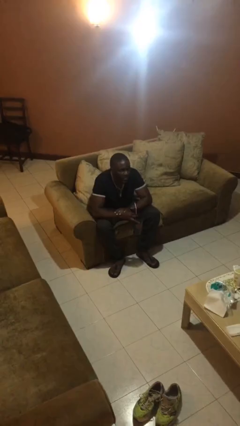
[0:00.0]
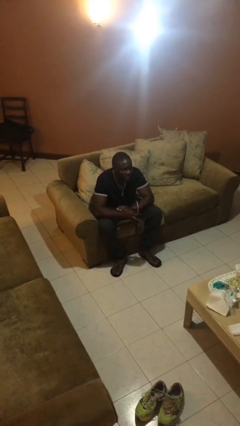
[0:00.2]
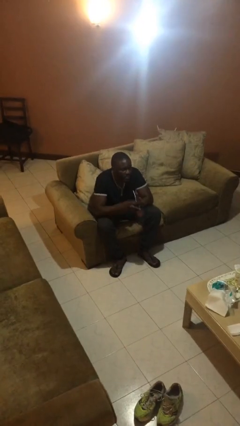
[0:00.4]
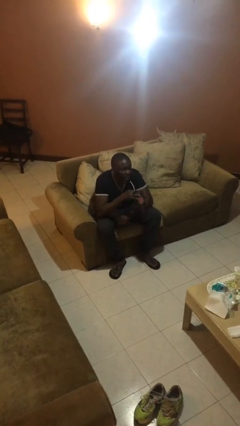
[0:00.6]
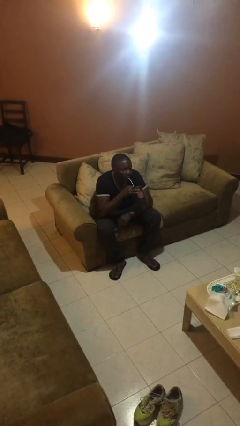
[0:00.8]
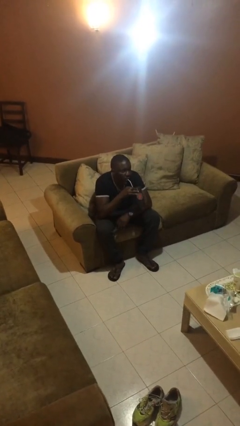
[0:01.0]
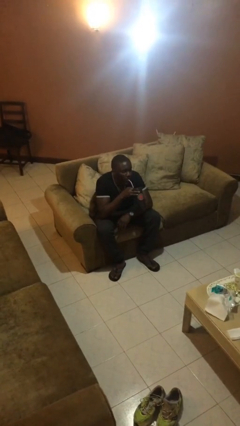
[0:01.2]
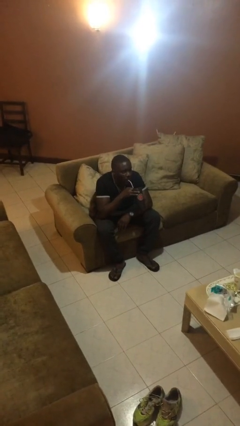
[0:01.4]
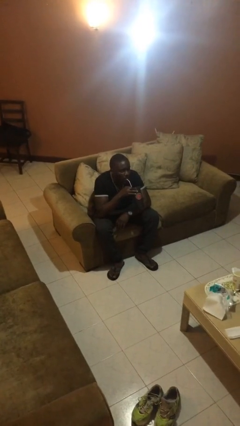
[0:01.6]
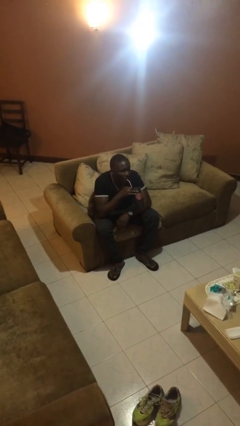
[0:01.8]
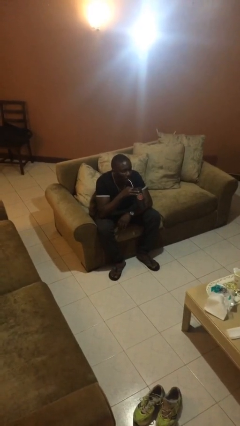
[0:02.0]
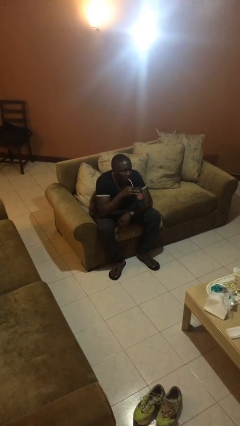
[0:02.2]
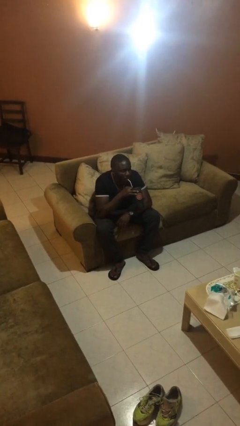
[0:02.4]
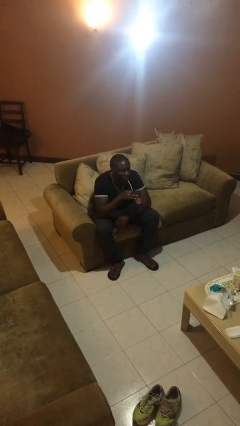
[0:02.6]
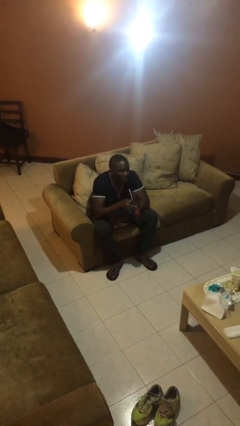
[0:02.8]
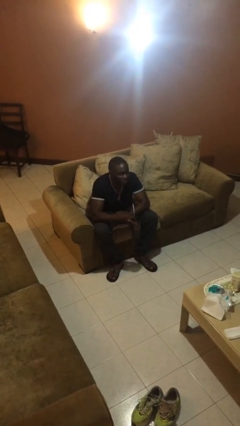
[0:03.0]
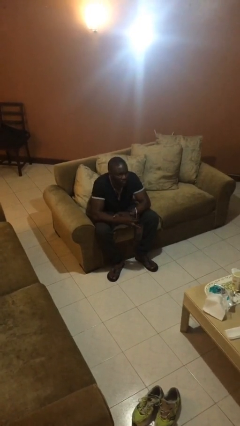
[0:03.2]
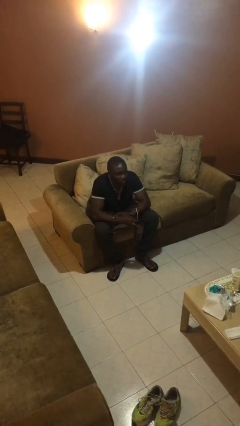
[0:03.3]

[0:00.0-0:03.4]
person drinks from straw

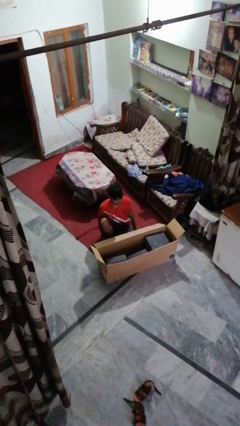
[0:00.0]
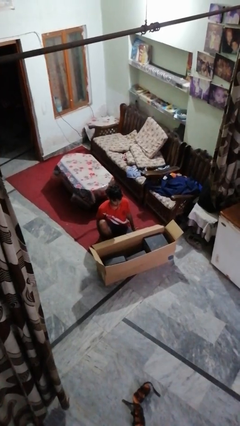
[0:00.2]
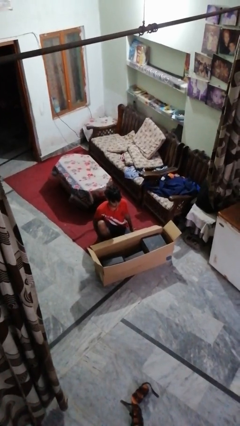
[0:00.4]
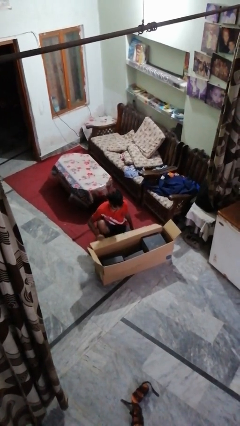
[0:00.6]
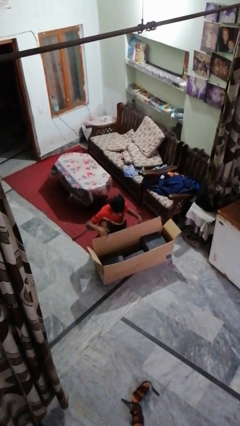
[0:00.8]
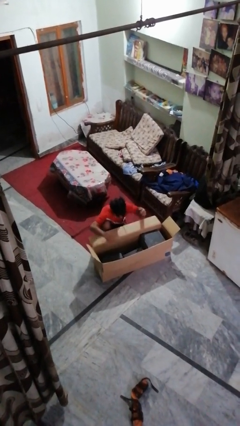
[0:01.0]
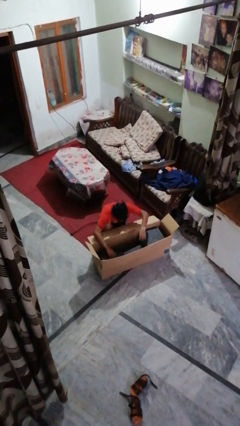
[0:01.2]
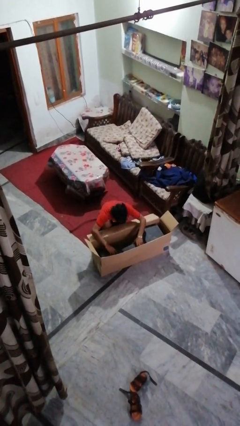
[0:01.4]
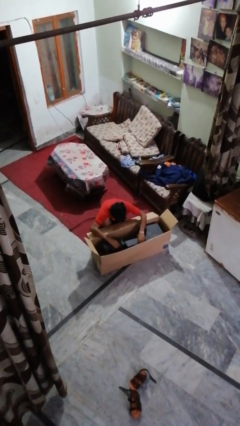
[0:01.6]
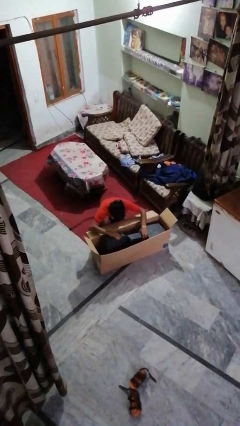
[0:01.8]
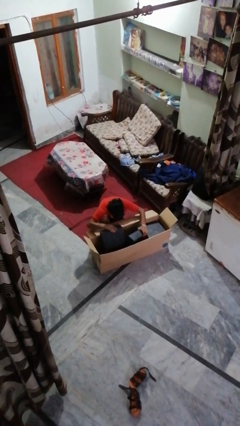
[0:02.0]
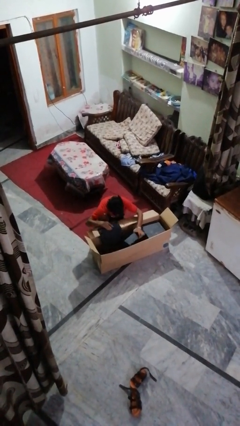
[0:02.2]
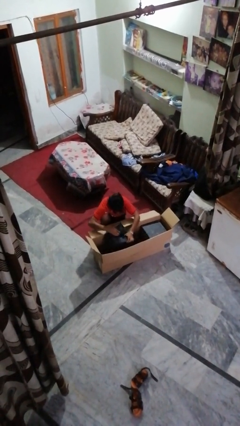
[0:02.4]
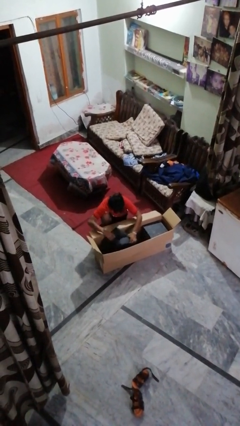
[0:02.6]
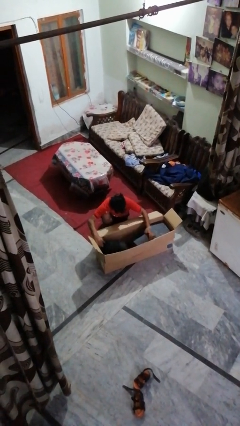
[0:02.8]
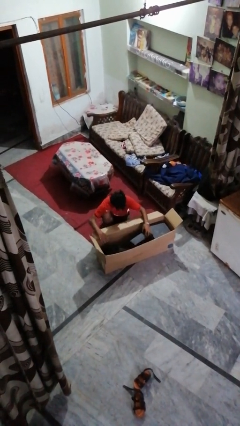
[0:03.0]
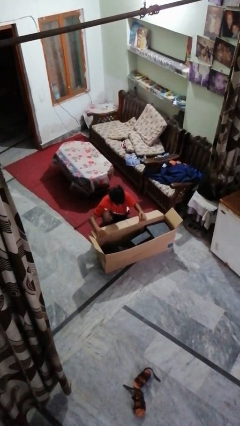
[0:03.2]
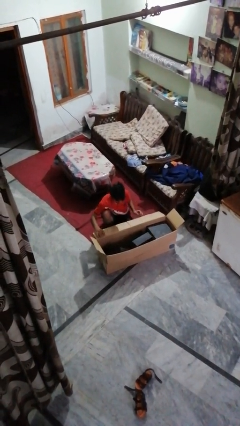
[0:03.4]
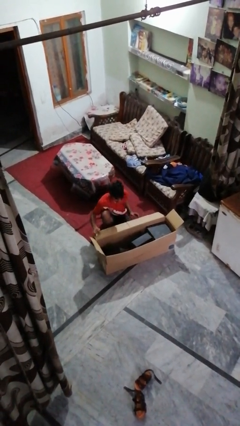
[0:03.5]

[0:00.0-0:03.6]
person searches in box

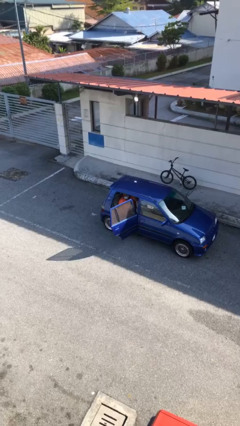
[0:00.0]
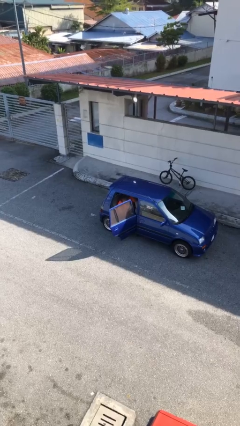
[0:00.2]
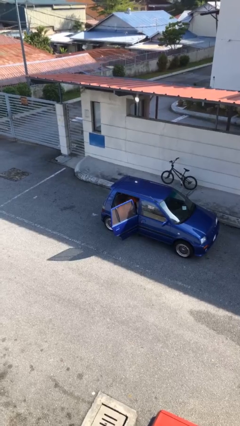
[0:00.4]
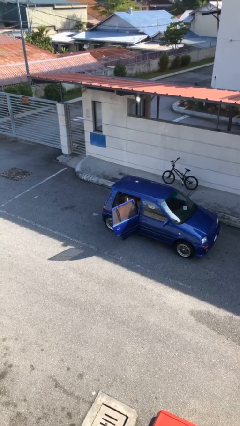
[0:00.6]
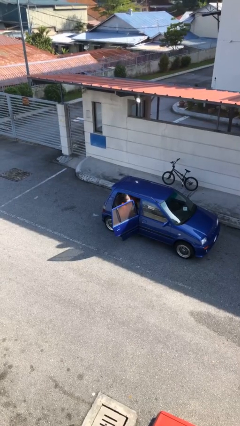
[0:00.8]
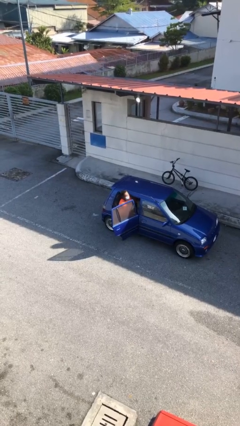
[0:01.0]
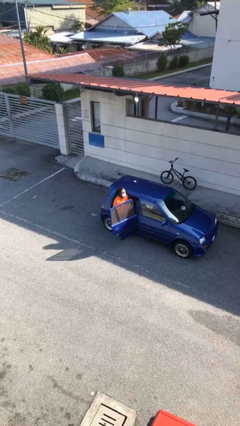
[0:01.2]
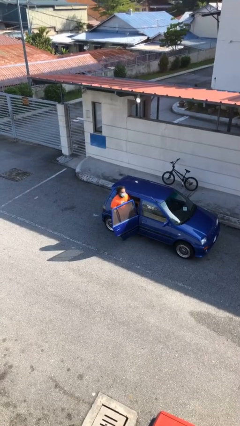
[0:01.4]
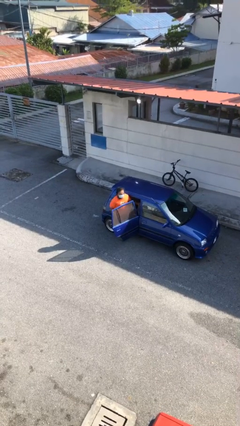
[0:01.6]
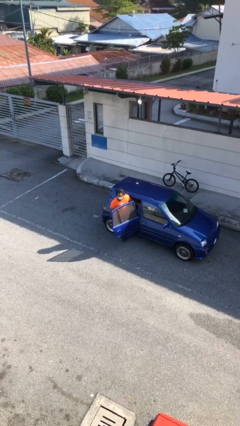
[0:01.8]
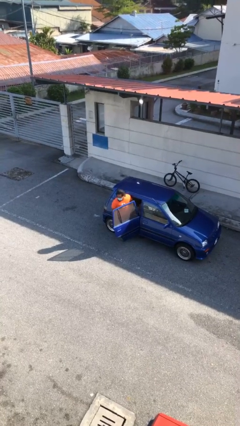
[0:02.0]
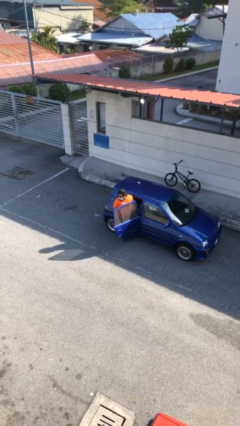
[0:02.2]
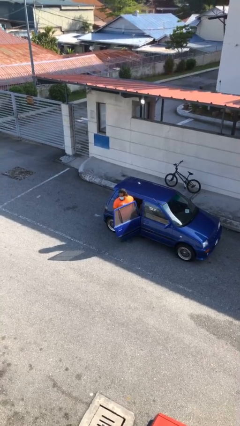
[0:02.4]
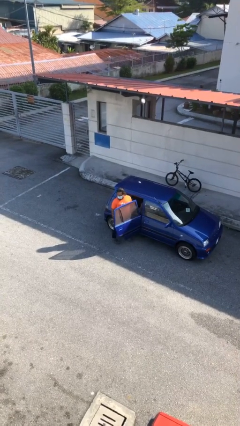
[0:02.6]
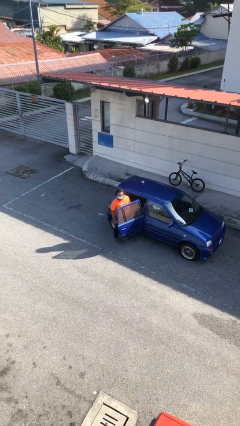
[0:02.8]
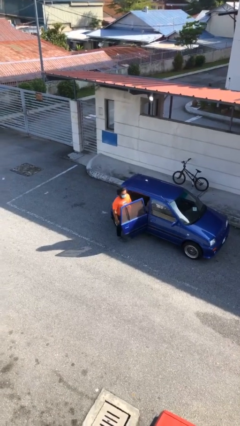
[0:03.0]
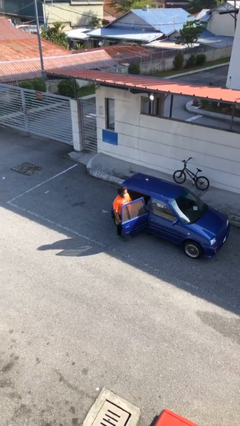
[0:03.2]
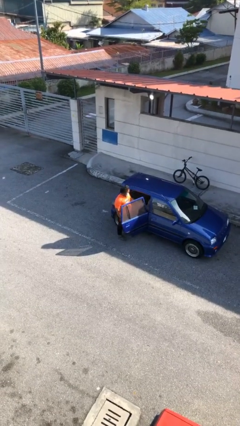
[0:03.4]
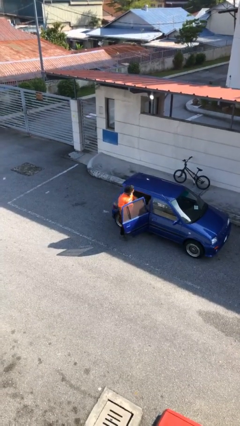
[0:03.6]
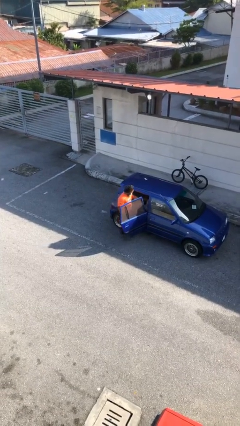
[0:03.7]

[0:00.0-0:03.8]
person exits car

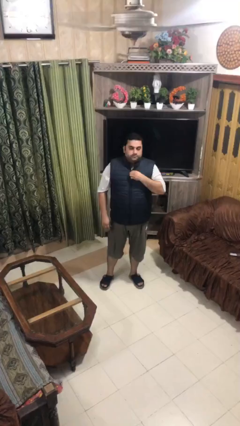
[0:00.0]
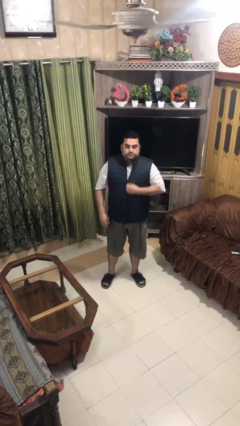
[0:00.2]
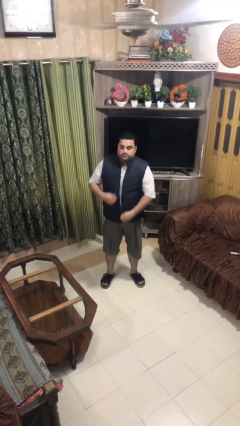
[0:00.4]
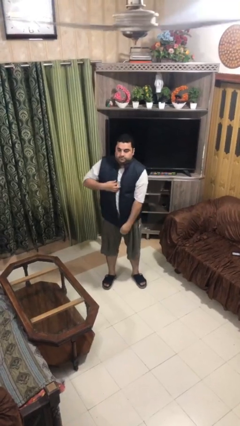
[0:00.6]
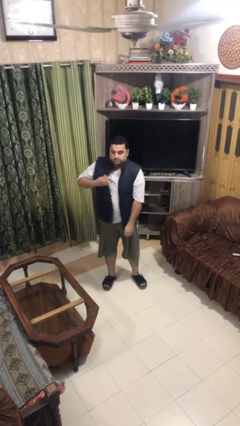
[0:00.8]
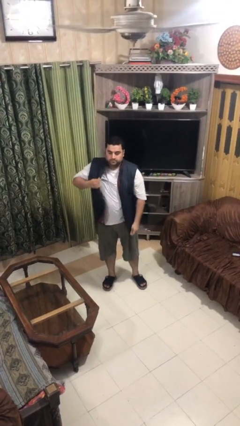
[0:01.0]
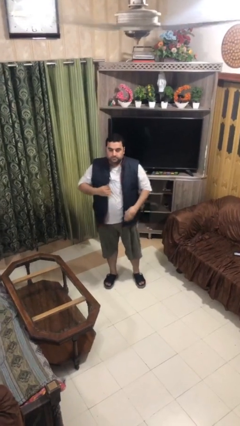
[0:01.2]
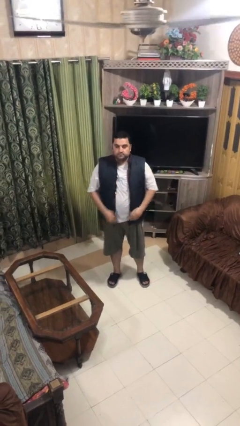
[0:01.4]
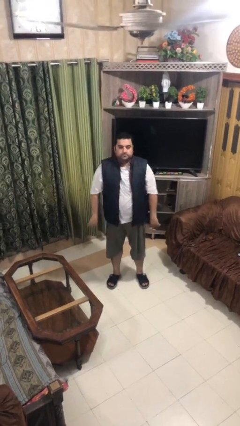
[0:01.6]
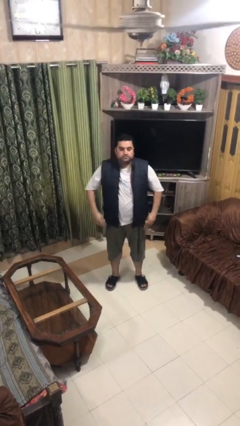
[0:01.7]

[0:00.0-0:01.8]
person unzips jacket

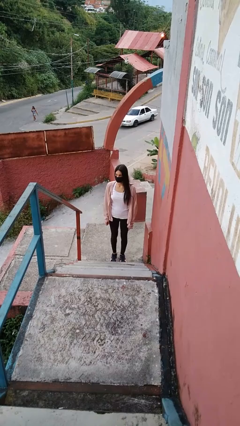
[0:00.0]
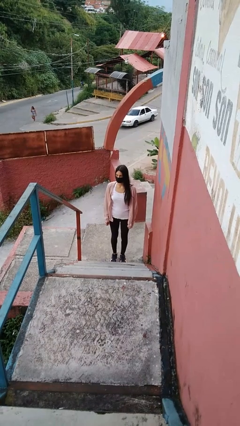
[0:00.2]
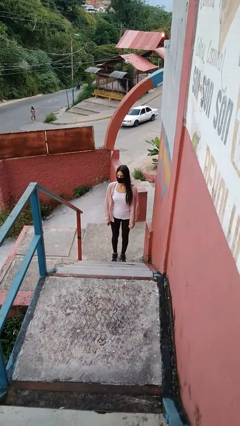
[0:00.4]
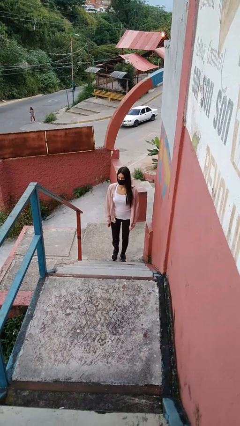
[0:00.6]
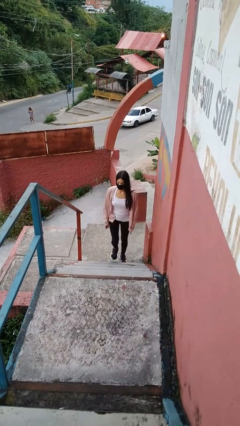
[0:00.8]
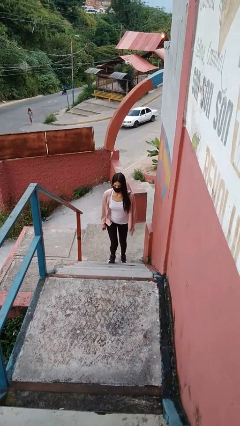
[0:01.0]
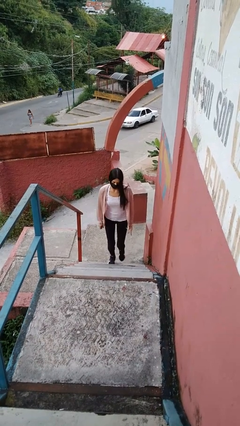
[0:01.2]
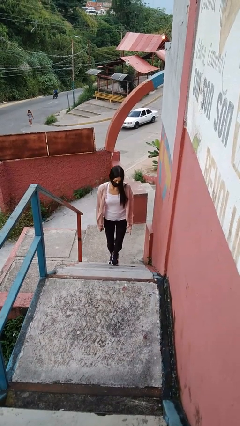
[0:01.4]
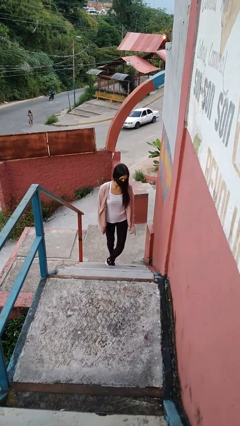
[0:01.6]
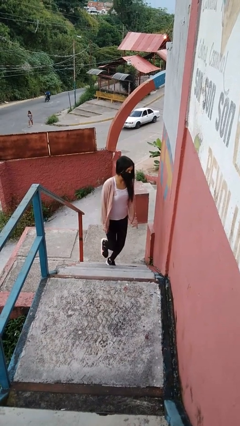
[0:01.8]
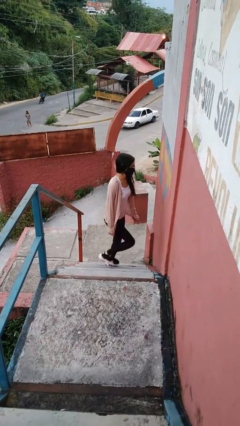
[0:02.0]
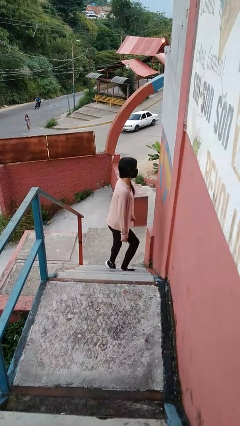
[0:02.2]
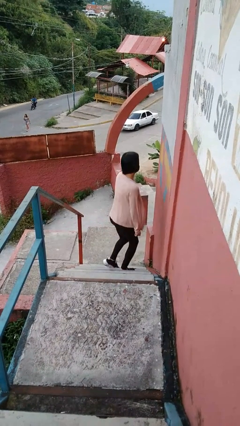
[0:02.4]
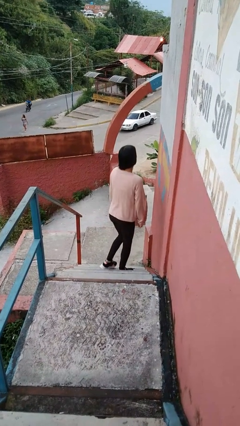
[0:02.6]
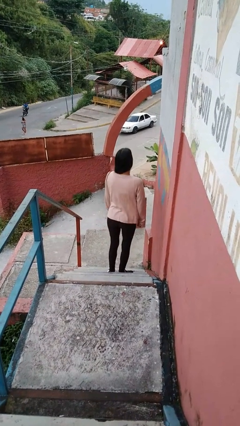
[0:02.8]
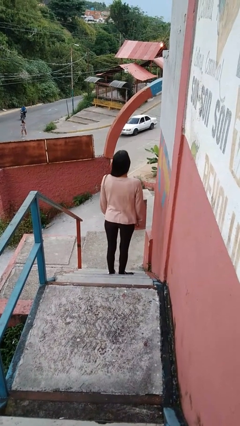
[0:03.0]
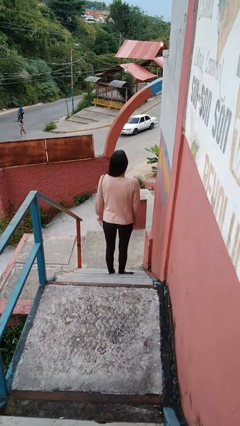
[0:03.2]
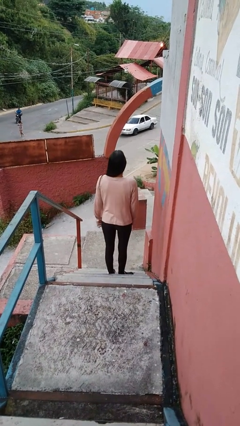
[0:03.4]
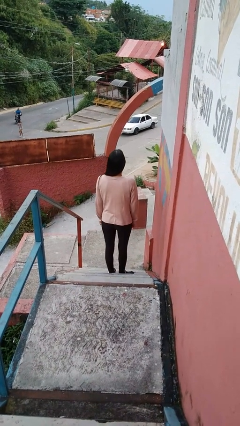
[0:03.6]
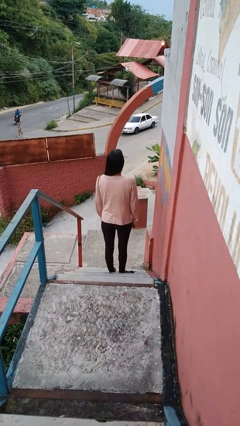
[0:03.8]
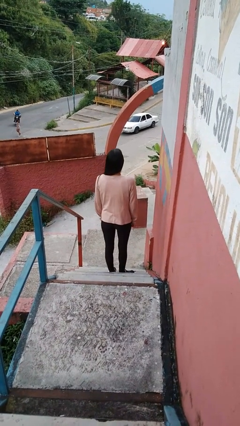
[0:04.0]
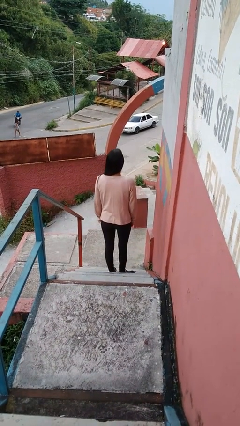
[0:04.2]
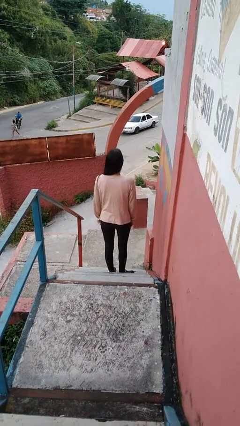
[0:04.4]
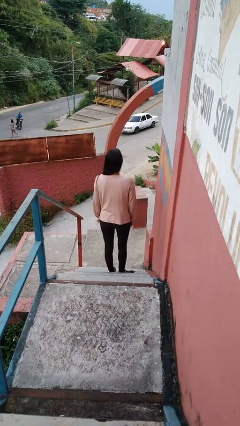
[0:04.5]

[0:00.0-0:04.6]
person climbs up stairs

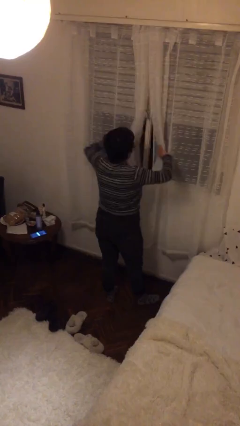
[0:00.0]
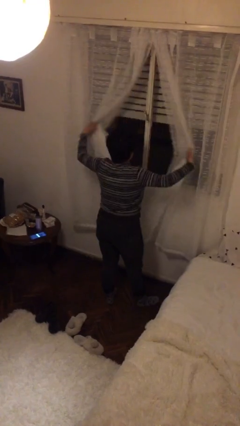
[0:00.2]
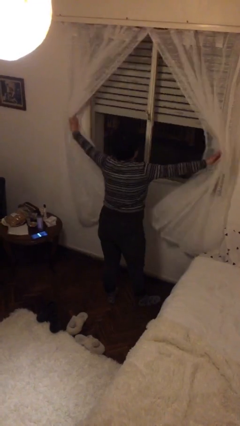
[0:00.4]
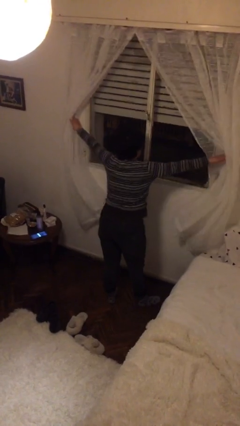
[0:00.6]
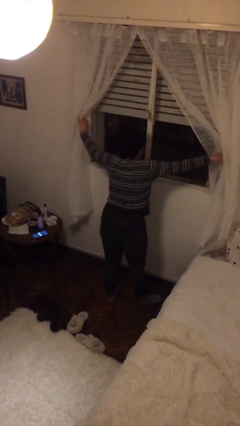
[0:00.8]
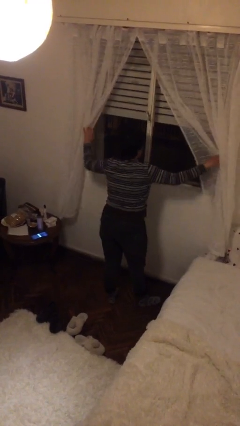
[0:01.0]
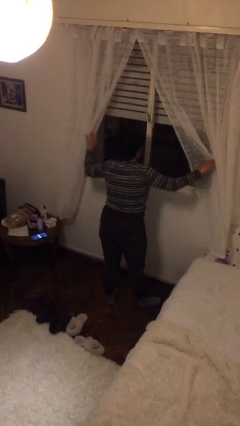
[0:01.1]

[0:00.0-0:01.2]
person opens curtains
